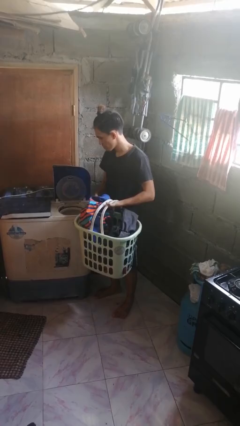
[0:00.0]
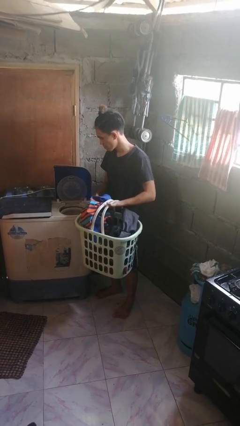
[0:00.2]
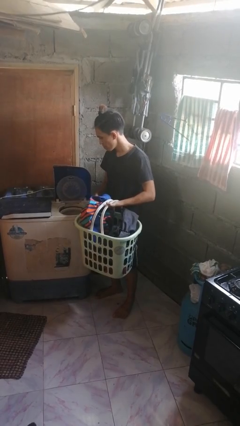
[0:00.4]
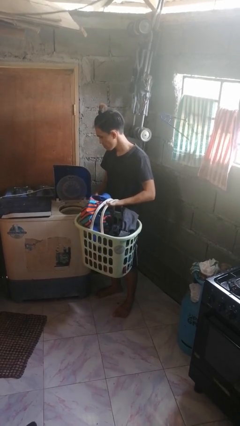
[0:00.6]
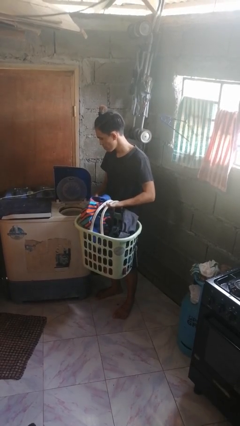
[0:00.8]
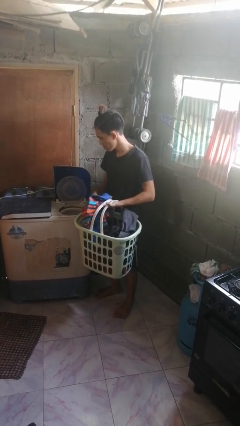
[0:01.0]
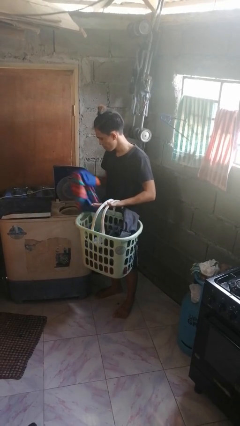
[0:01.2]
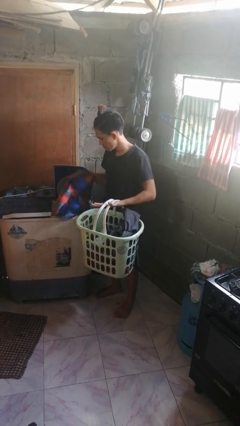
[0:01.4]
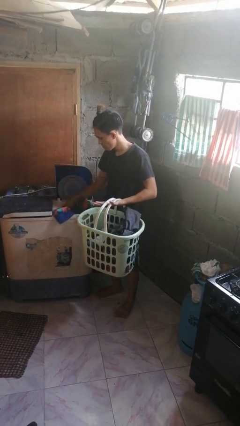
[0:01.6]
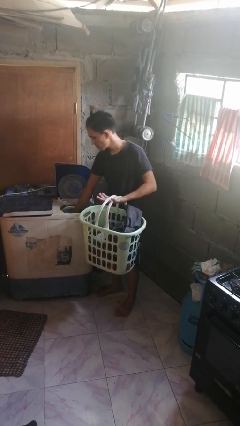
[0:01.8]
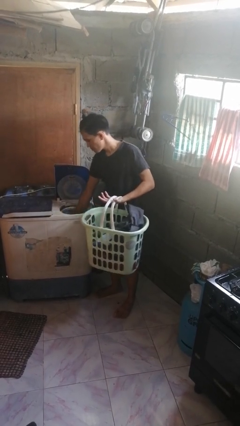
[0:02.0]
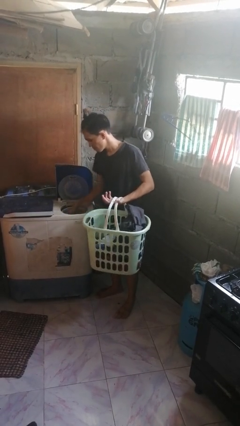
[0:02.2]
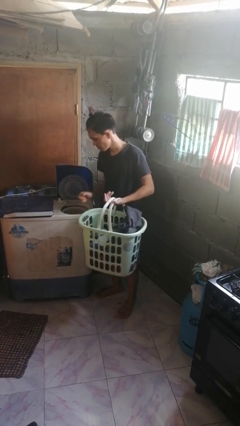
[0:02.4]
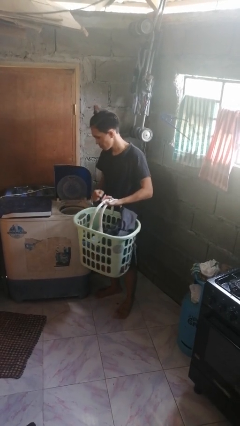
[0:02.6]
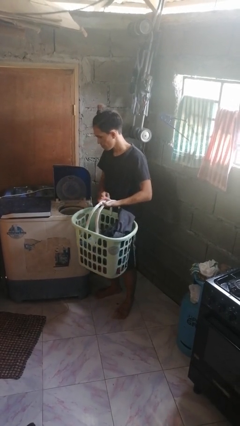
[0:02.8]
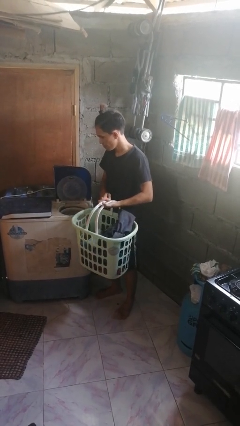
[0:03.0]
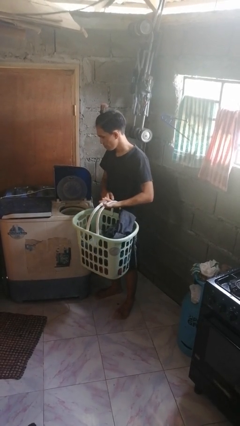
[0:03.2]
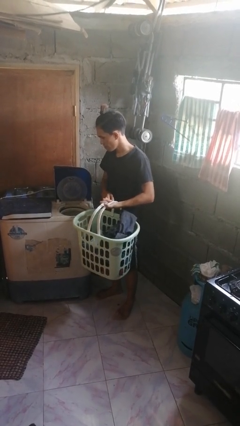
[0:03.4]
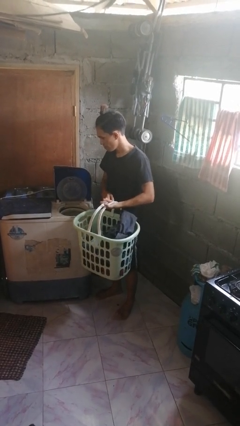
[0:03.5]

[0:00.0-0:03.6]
person loads dryer

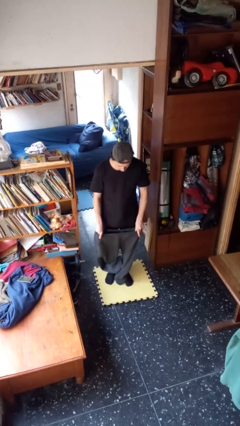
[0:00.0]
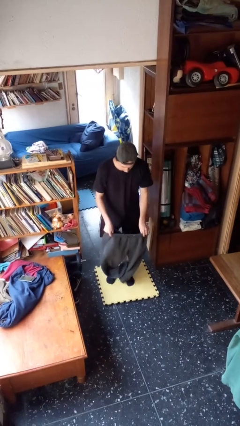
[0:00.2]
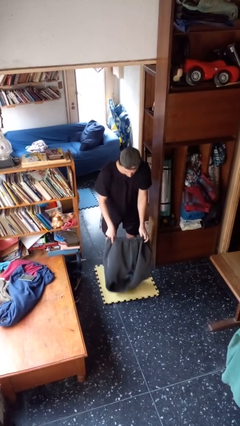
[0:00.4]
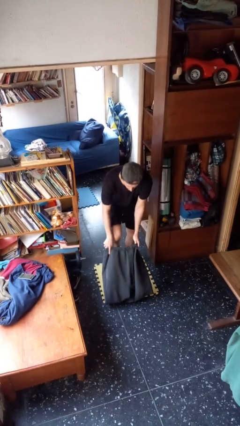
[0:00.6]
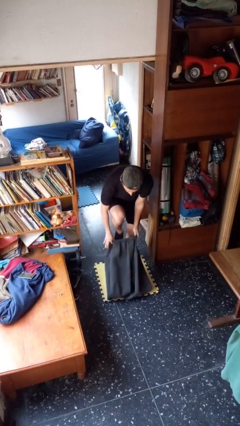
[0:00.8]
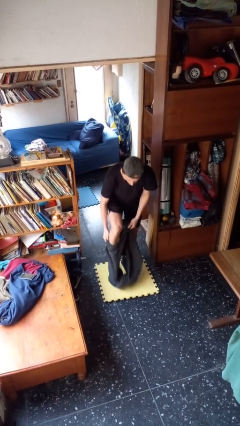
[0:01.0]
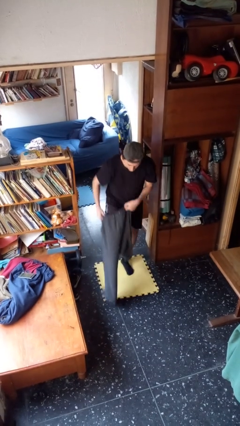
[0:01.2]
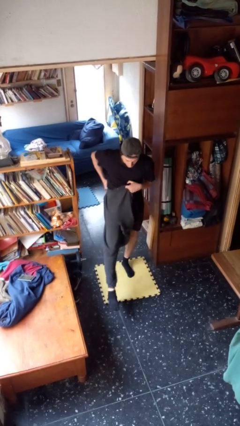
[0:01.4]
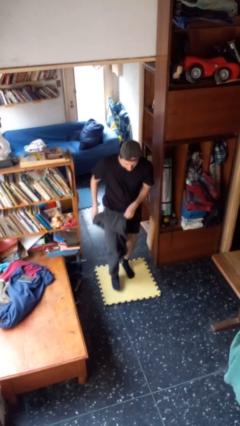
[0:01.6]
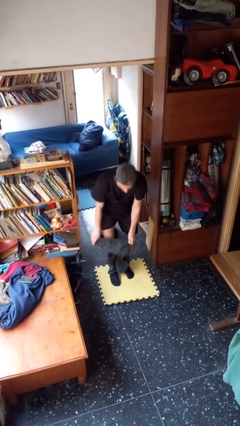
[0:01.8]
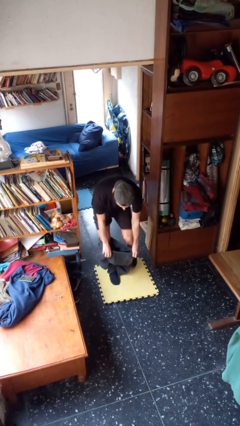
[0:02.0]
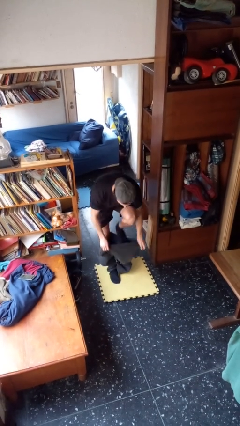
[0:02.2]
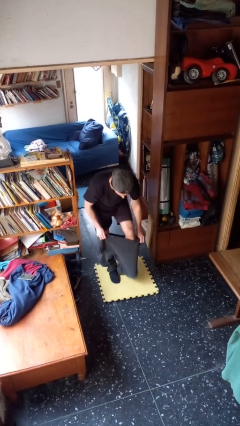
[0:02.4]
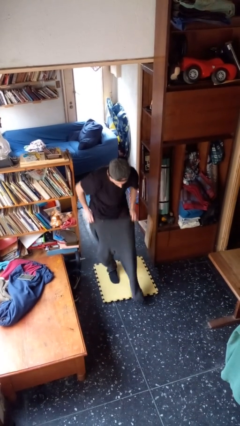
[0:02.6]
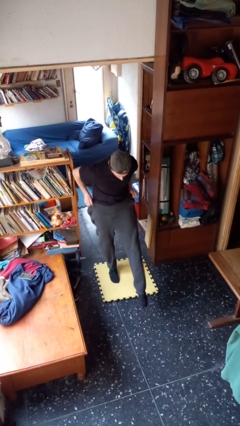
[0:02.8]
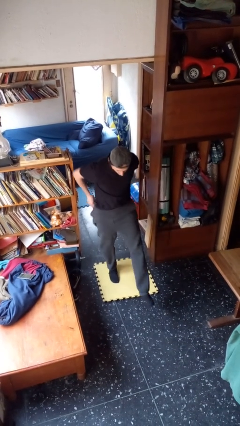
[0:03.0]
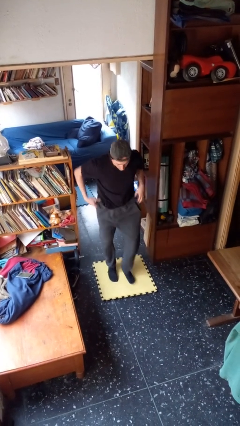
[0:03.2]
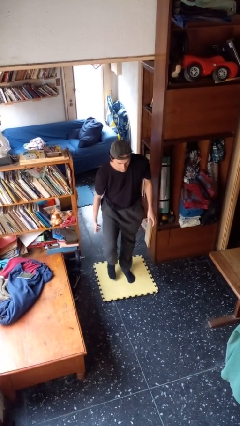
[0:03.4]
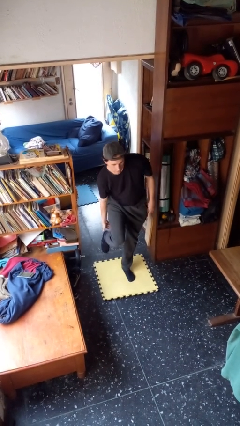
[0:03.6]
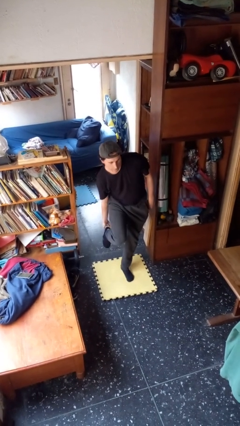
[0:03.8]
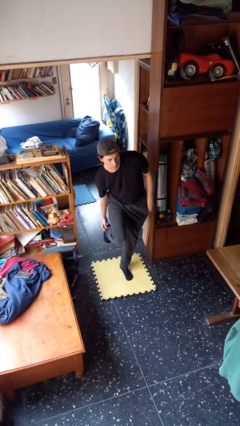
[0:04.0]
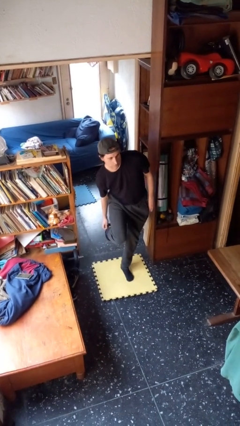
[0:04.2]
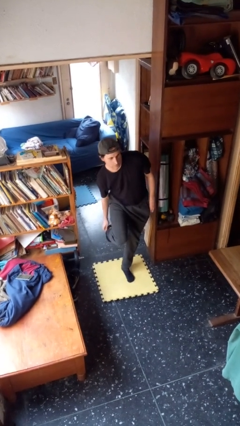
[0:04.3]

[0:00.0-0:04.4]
person puts on pants

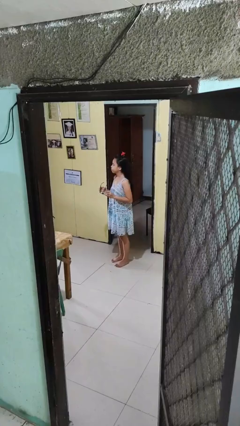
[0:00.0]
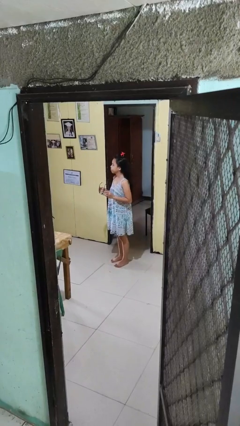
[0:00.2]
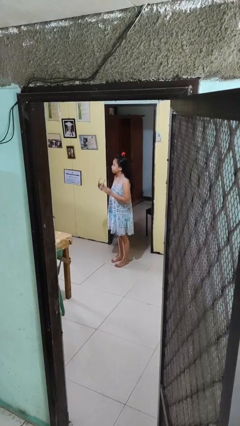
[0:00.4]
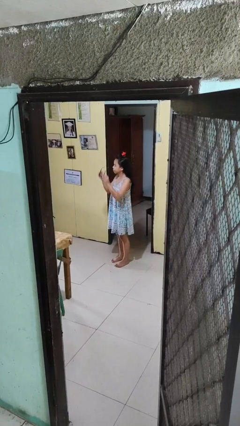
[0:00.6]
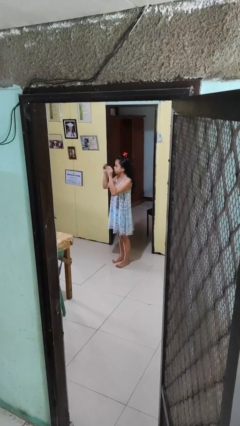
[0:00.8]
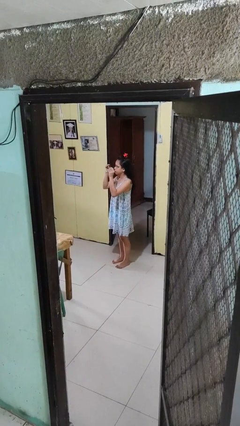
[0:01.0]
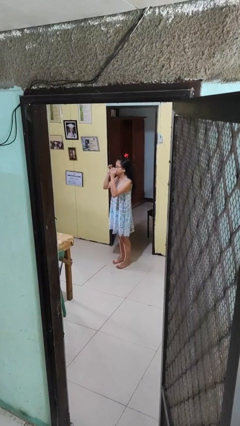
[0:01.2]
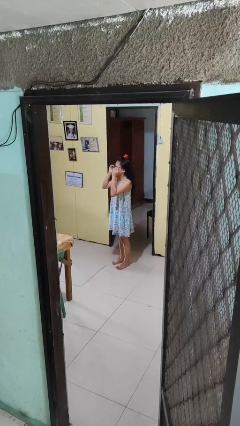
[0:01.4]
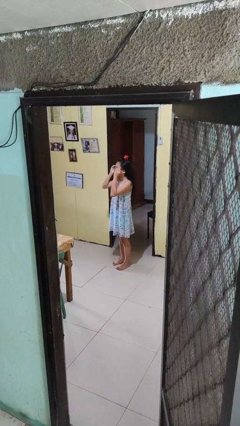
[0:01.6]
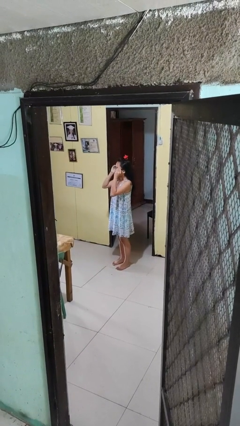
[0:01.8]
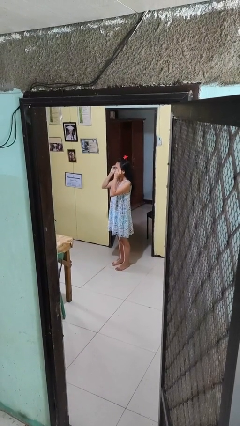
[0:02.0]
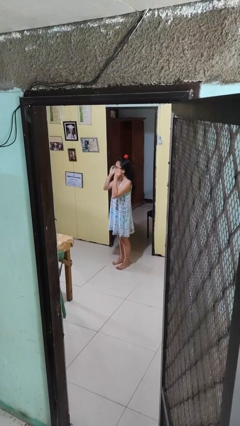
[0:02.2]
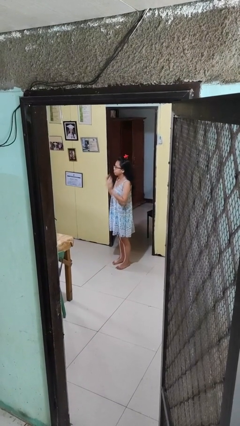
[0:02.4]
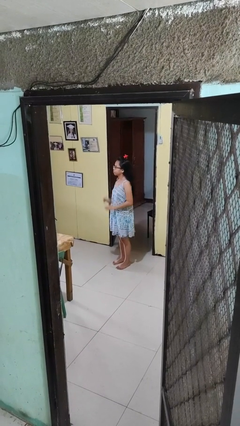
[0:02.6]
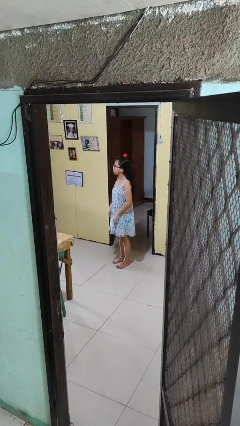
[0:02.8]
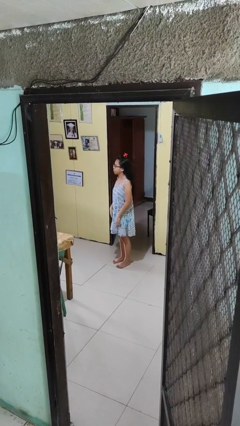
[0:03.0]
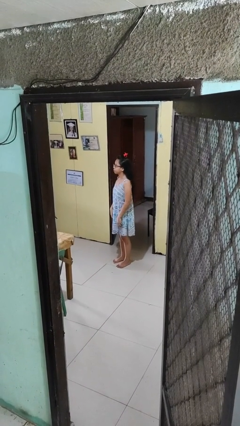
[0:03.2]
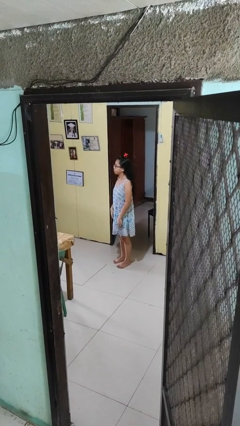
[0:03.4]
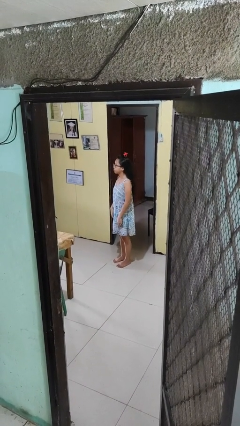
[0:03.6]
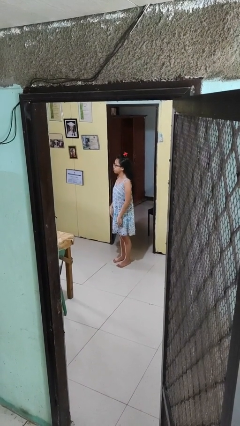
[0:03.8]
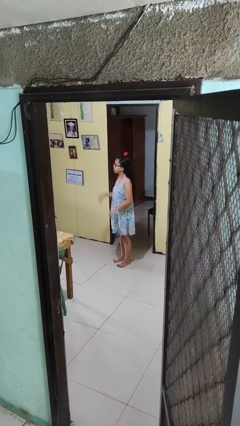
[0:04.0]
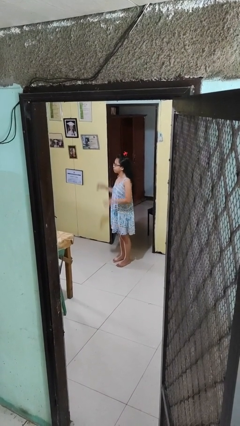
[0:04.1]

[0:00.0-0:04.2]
person puts on glasses

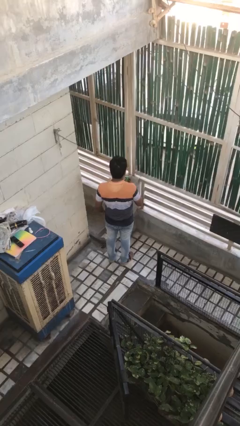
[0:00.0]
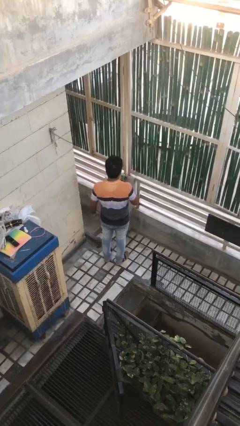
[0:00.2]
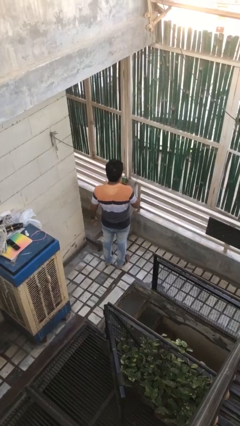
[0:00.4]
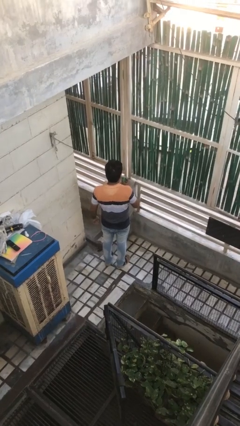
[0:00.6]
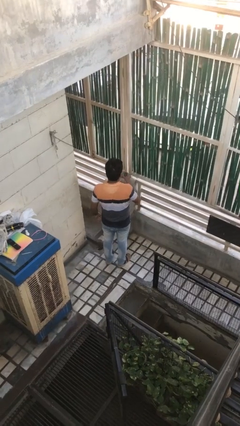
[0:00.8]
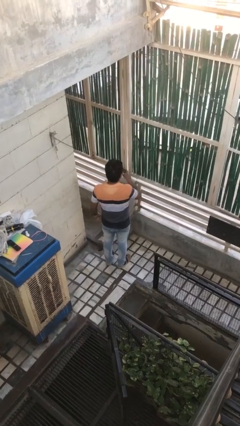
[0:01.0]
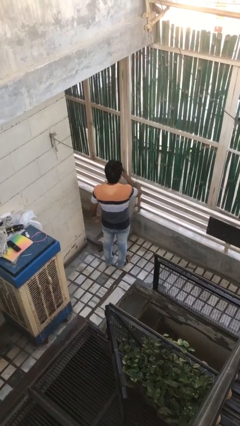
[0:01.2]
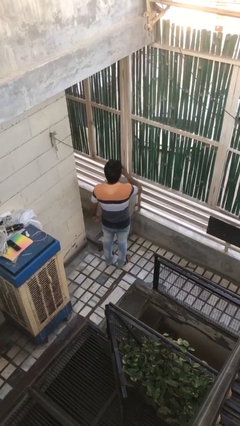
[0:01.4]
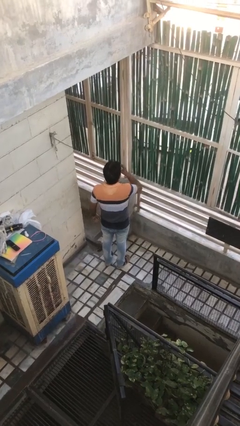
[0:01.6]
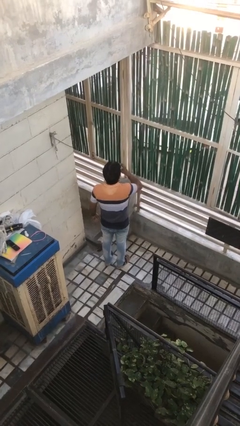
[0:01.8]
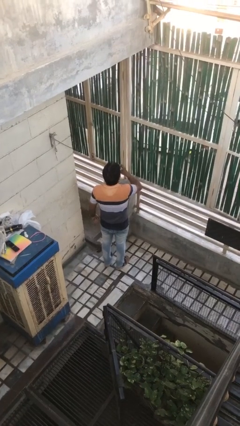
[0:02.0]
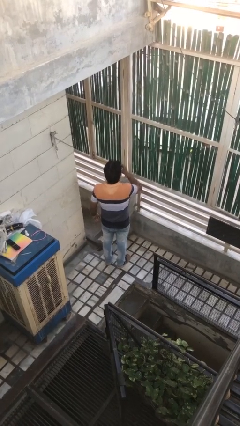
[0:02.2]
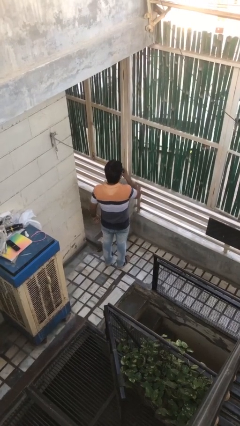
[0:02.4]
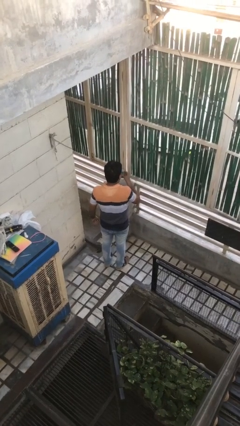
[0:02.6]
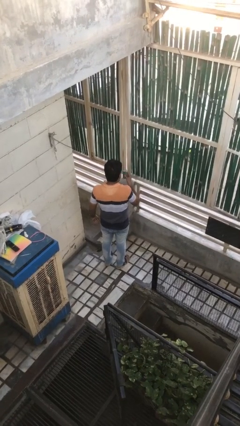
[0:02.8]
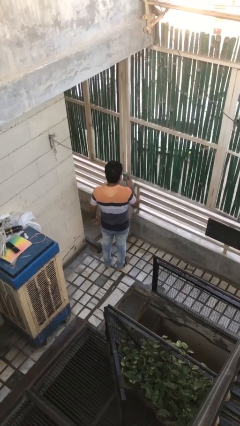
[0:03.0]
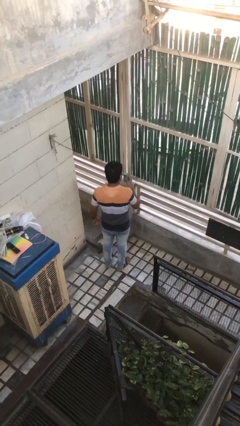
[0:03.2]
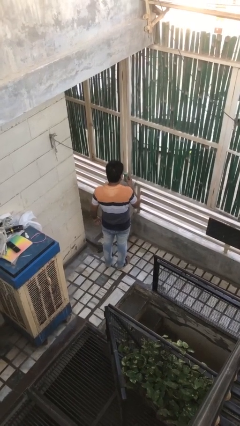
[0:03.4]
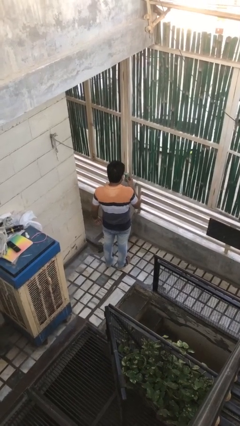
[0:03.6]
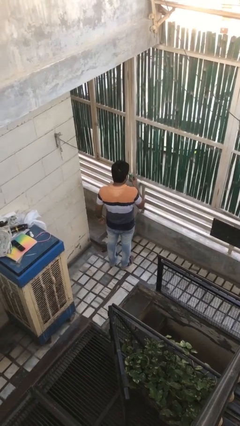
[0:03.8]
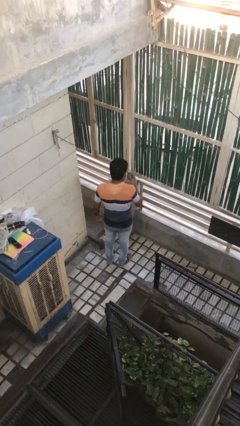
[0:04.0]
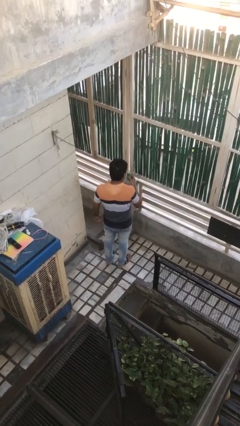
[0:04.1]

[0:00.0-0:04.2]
person drinks from beverage can

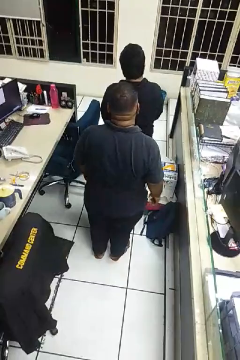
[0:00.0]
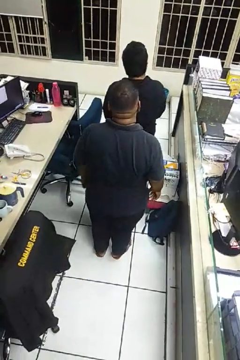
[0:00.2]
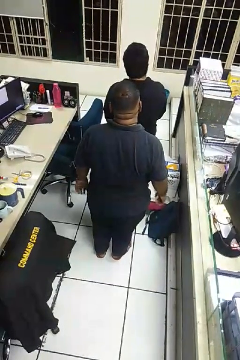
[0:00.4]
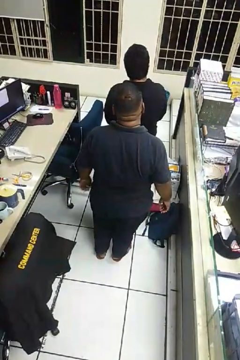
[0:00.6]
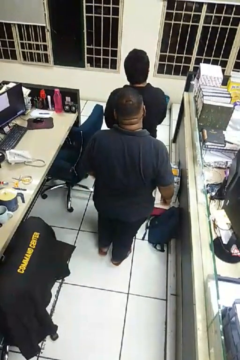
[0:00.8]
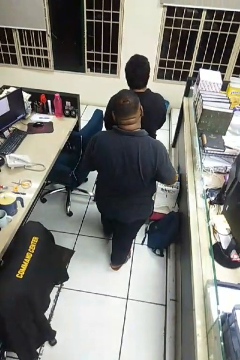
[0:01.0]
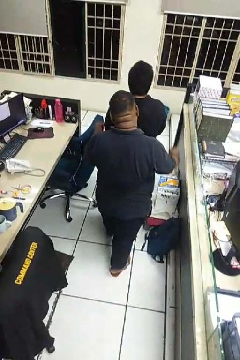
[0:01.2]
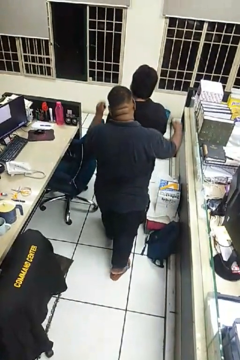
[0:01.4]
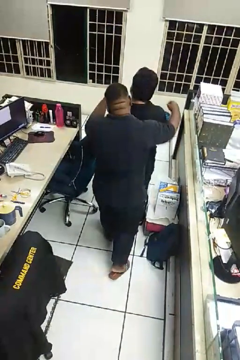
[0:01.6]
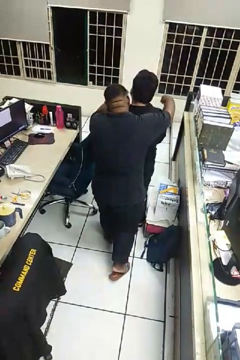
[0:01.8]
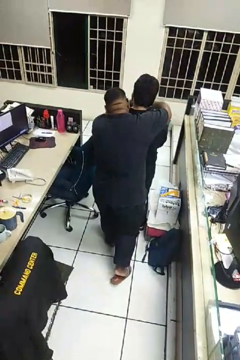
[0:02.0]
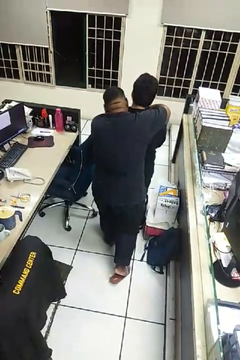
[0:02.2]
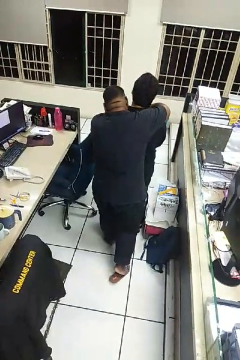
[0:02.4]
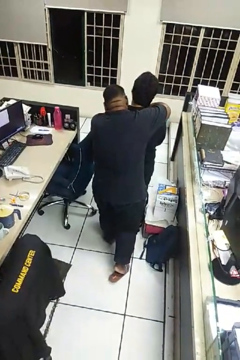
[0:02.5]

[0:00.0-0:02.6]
person hugs person from behind
